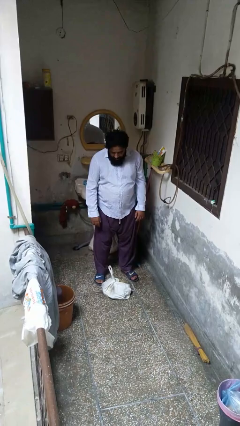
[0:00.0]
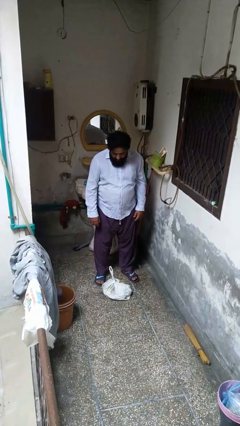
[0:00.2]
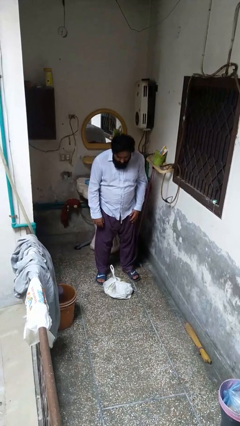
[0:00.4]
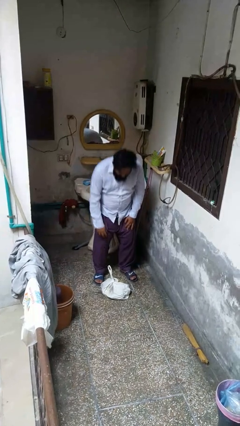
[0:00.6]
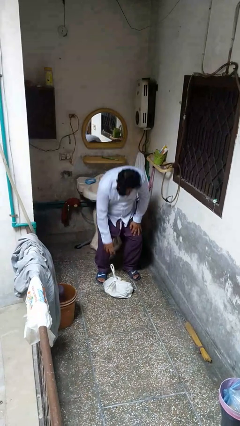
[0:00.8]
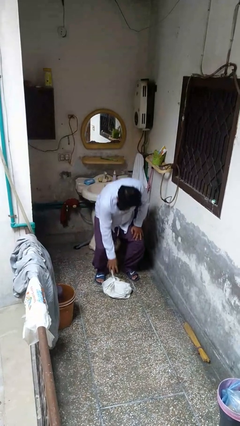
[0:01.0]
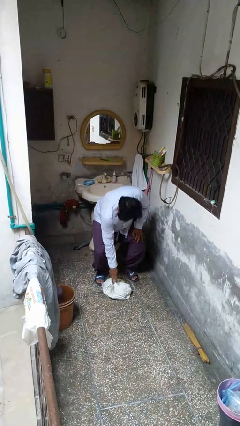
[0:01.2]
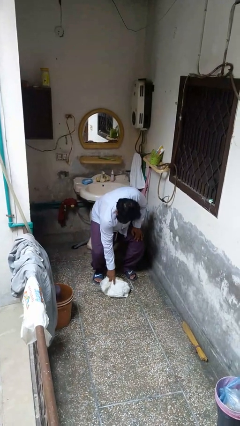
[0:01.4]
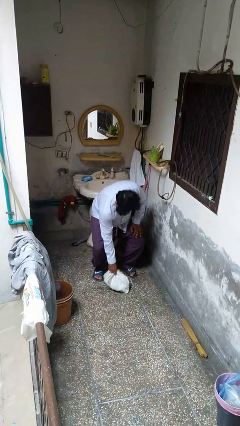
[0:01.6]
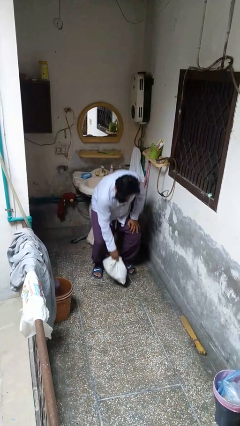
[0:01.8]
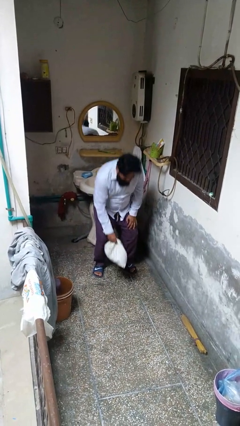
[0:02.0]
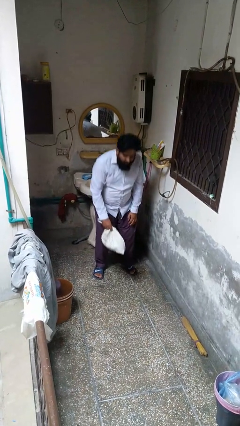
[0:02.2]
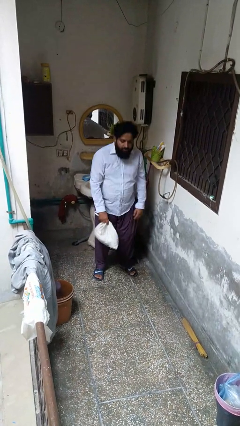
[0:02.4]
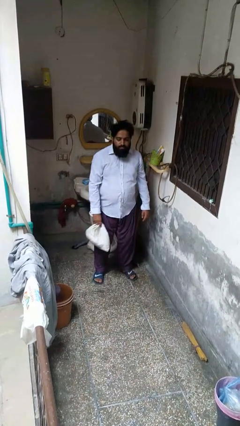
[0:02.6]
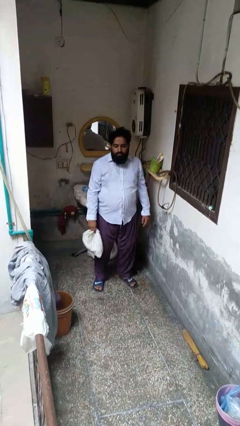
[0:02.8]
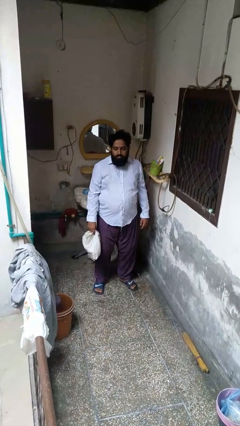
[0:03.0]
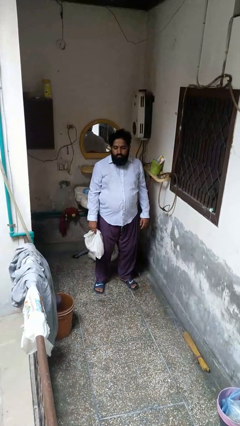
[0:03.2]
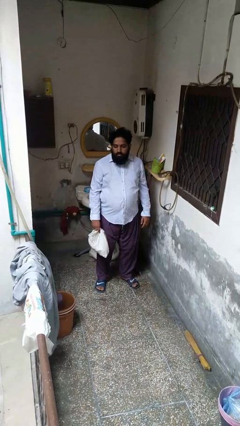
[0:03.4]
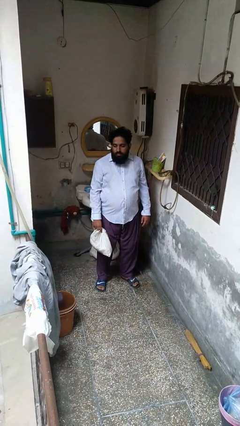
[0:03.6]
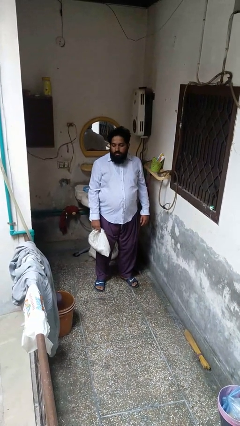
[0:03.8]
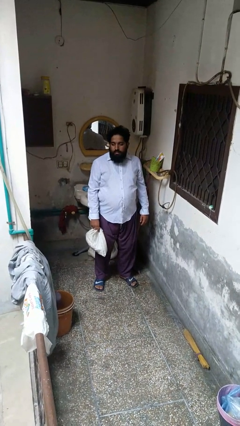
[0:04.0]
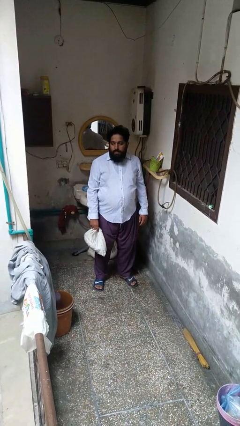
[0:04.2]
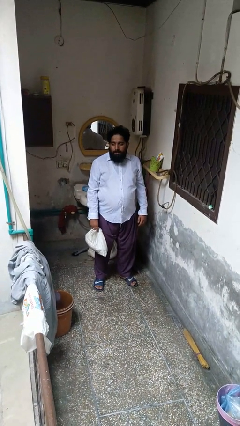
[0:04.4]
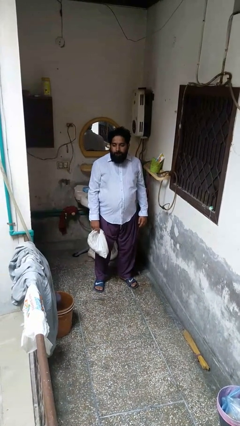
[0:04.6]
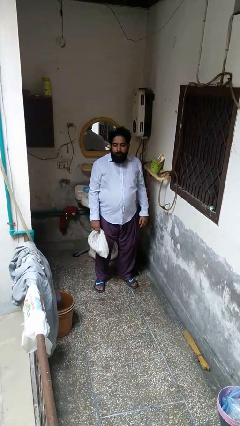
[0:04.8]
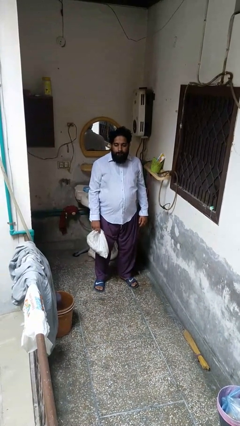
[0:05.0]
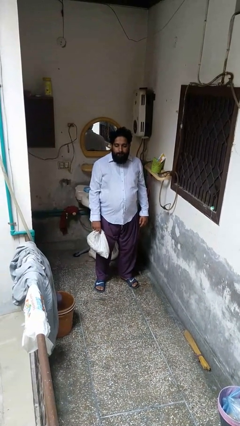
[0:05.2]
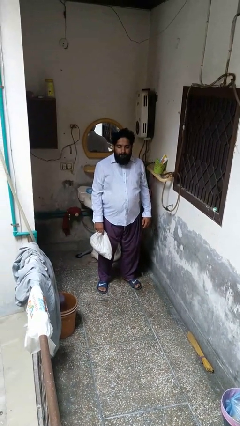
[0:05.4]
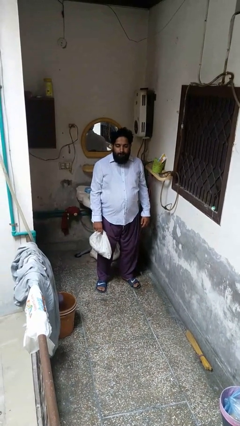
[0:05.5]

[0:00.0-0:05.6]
person picks up object from floor

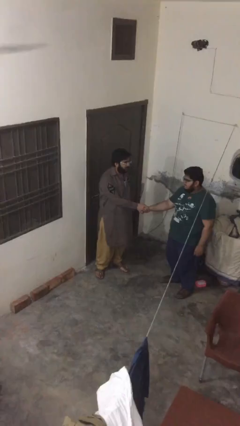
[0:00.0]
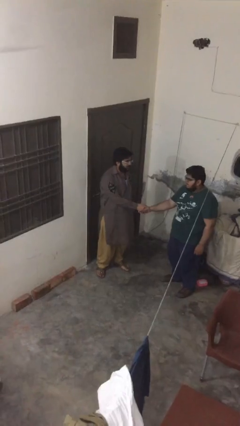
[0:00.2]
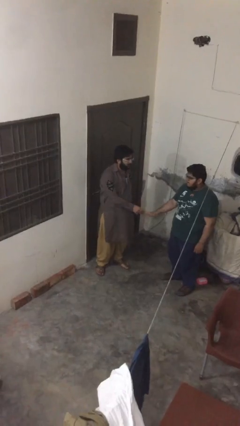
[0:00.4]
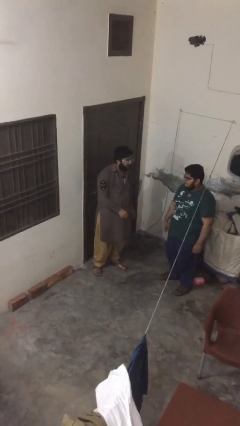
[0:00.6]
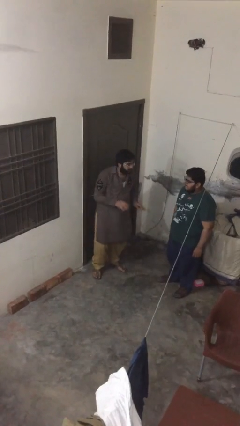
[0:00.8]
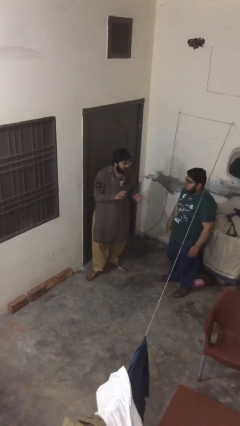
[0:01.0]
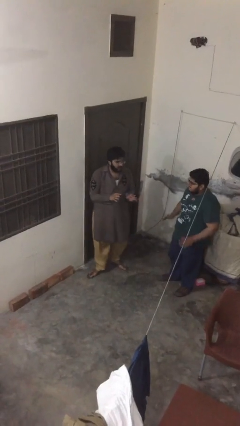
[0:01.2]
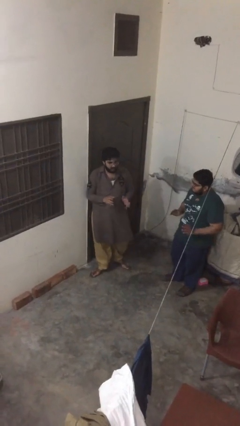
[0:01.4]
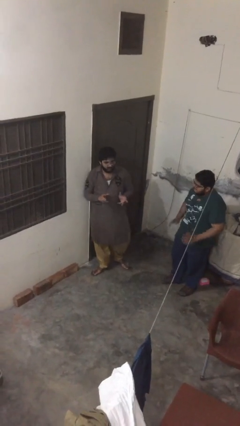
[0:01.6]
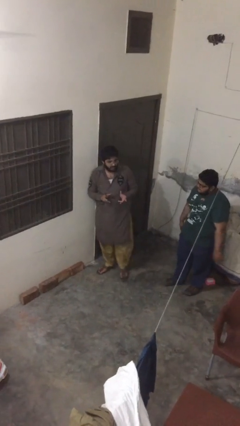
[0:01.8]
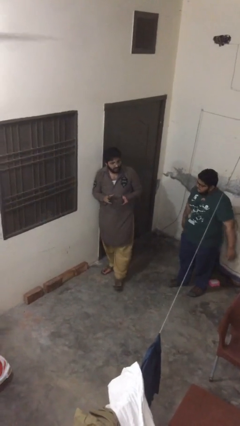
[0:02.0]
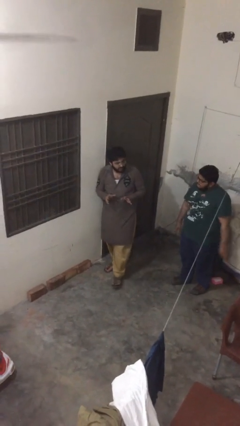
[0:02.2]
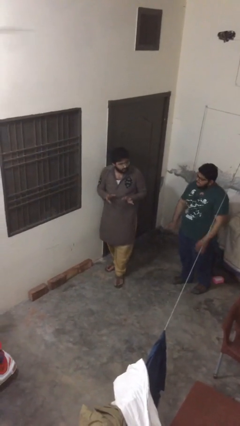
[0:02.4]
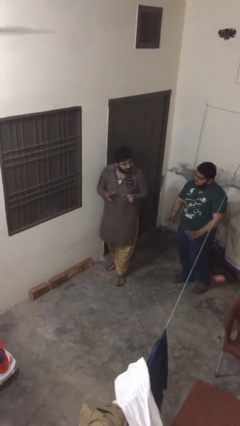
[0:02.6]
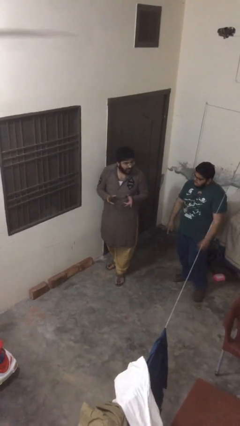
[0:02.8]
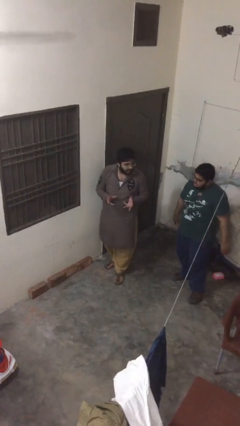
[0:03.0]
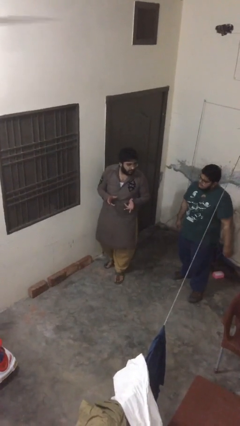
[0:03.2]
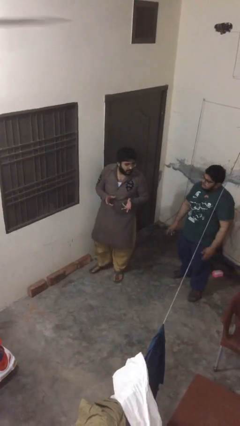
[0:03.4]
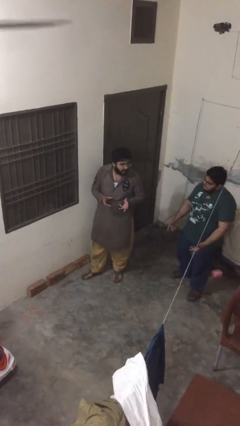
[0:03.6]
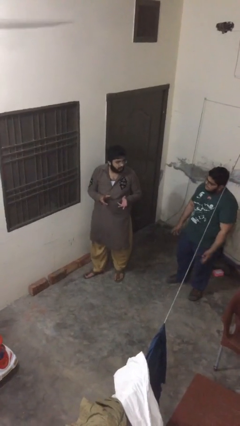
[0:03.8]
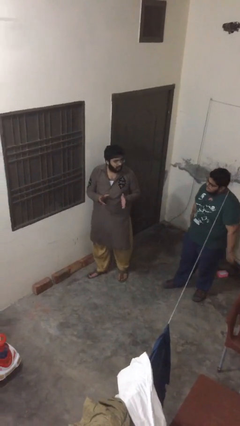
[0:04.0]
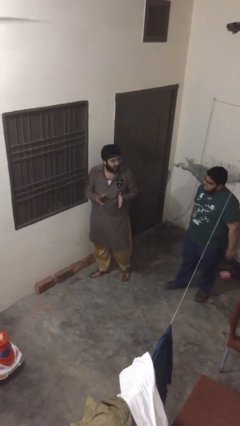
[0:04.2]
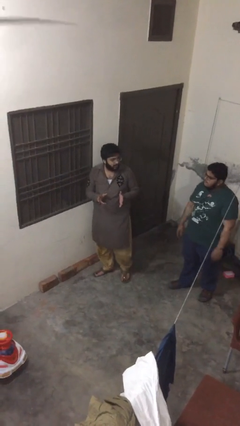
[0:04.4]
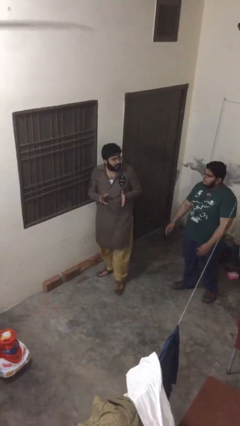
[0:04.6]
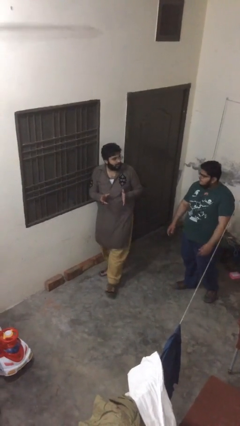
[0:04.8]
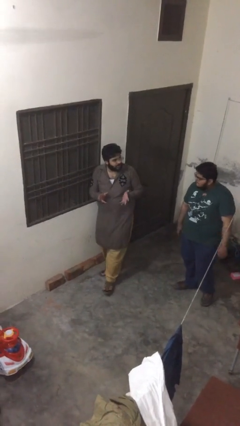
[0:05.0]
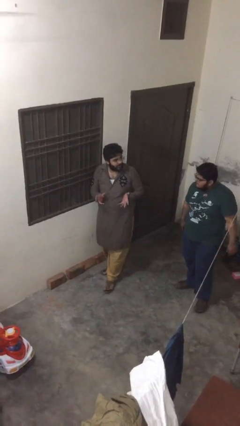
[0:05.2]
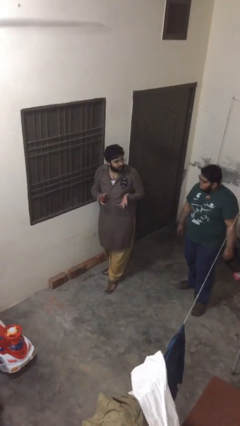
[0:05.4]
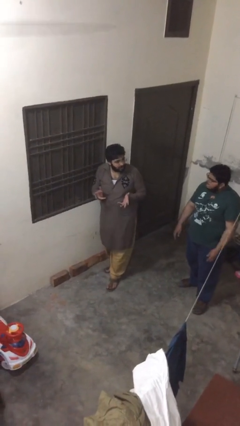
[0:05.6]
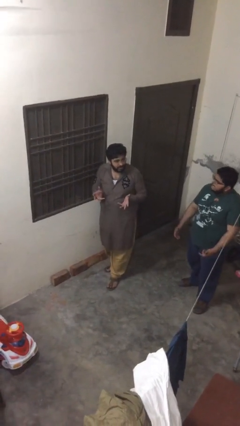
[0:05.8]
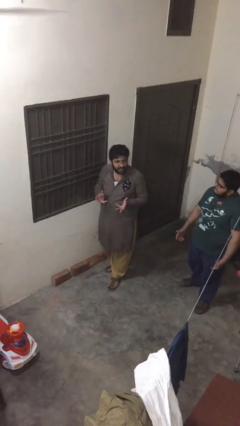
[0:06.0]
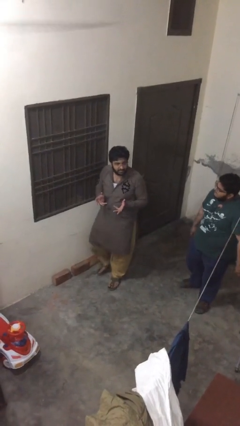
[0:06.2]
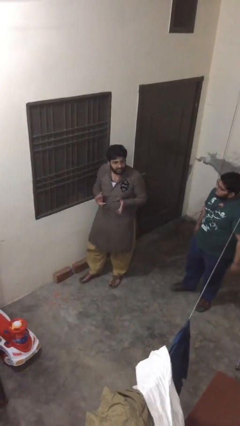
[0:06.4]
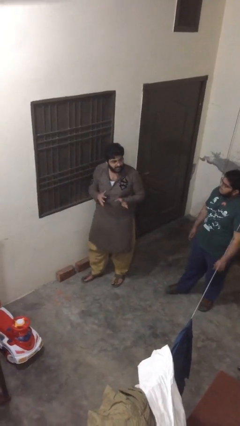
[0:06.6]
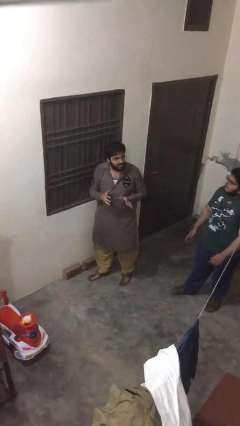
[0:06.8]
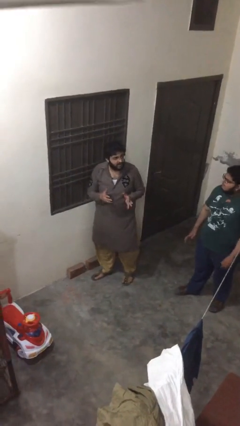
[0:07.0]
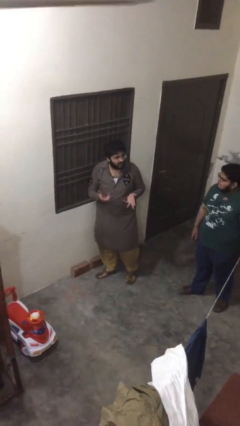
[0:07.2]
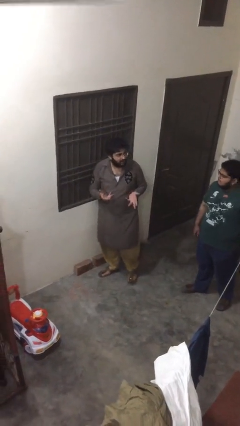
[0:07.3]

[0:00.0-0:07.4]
person talks to person

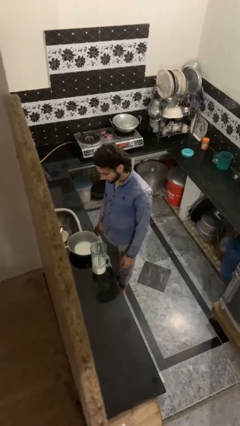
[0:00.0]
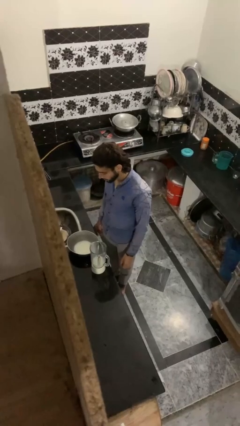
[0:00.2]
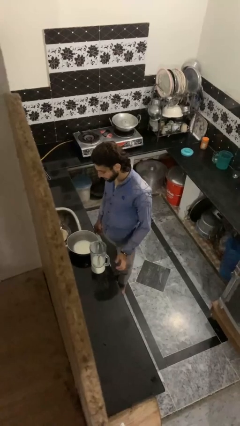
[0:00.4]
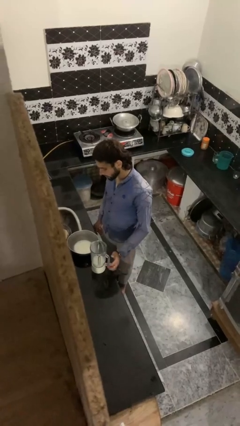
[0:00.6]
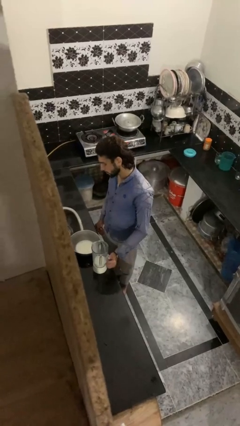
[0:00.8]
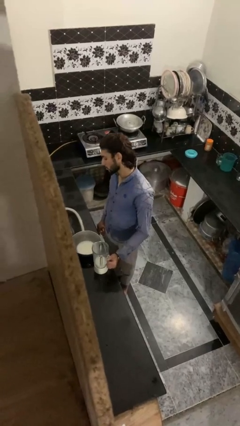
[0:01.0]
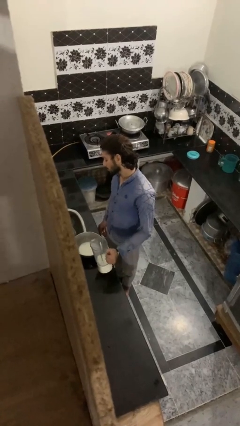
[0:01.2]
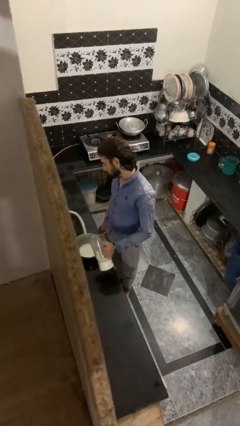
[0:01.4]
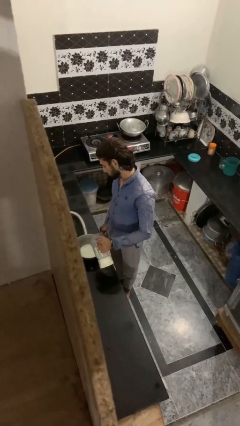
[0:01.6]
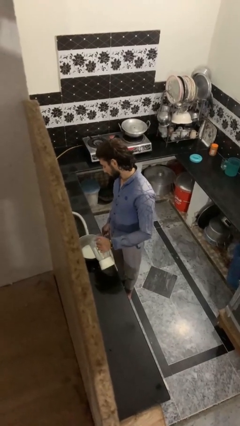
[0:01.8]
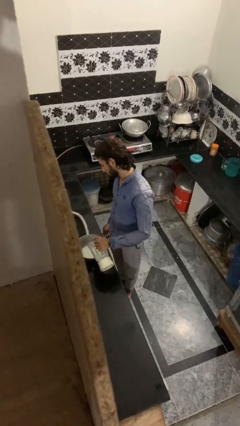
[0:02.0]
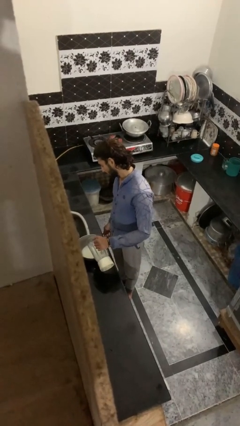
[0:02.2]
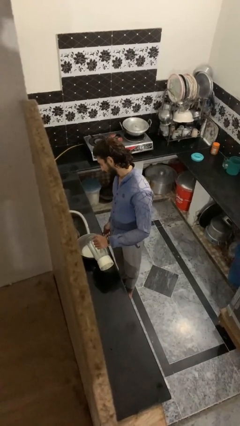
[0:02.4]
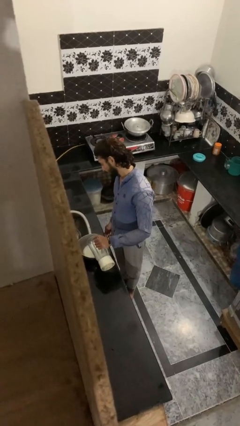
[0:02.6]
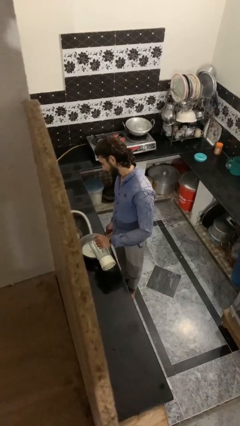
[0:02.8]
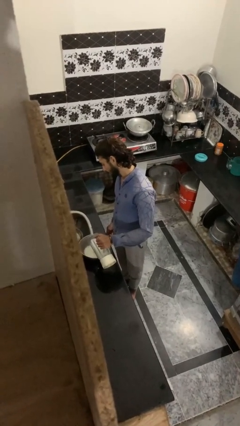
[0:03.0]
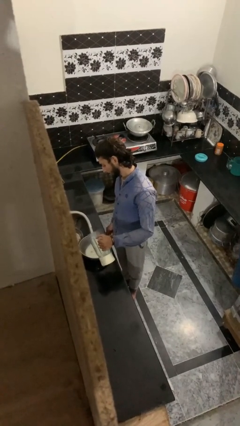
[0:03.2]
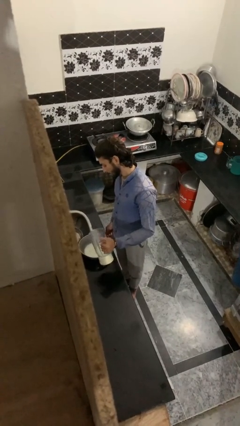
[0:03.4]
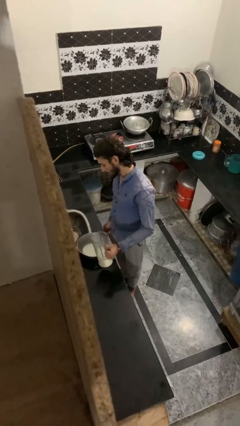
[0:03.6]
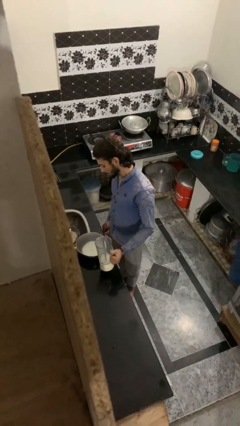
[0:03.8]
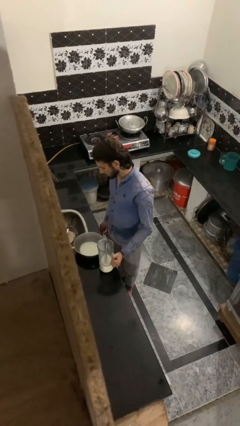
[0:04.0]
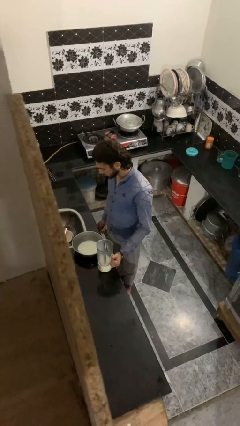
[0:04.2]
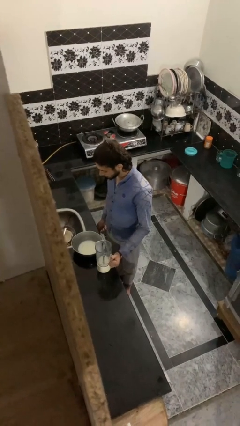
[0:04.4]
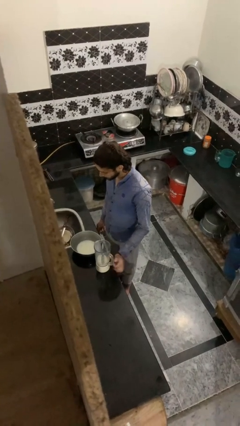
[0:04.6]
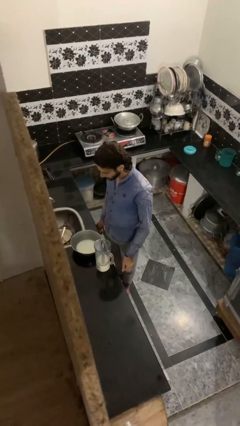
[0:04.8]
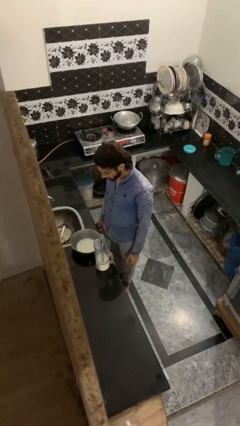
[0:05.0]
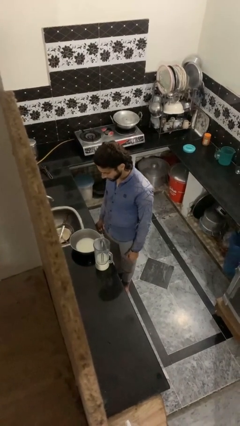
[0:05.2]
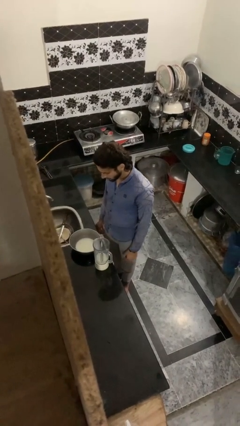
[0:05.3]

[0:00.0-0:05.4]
person pours into bowl
